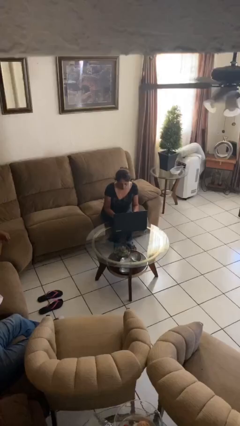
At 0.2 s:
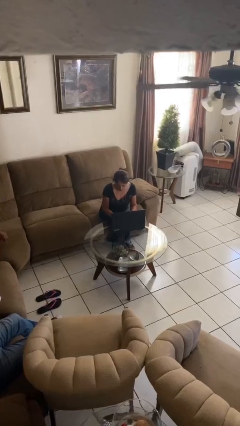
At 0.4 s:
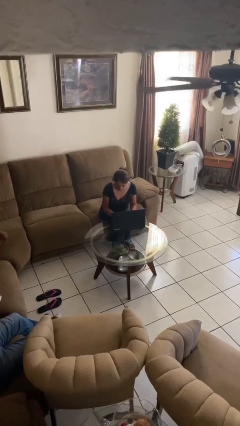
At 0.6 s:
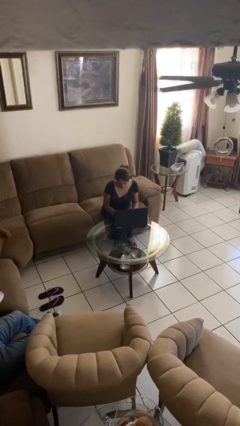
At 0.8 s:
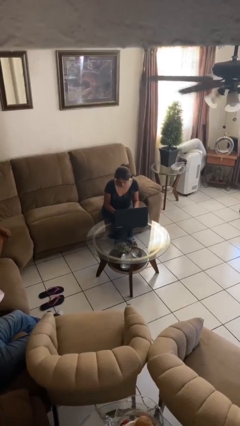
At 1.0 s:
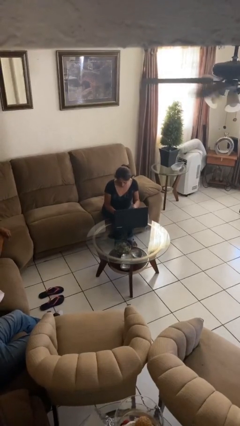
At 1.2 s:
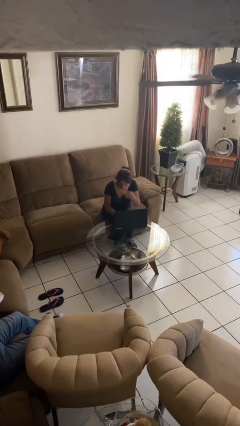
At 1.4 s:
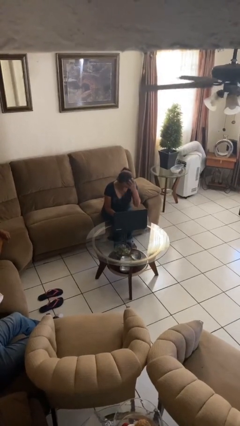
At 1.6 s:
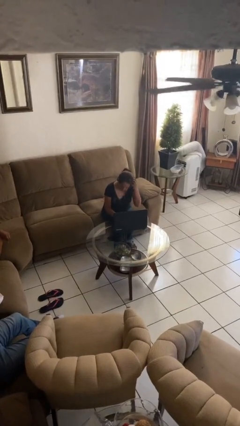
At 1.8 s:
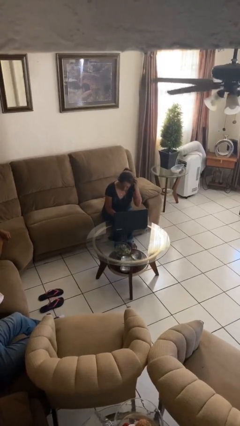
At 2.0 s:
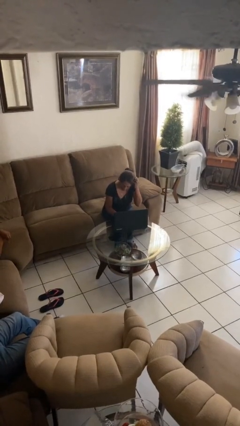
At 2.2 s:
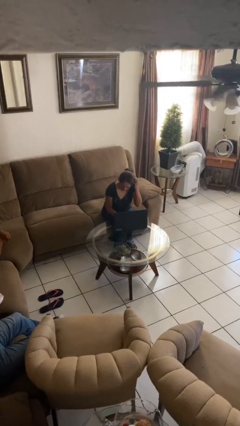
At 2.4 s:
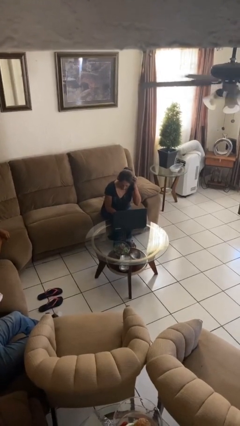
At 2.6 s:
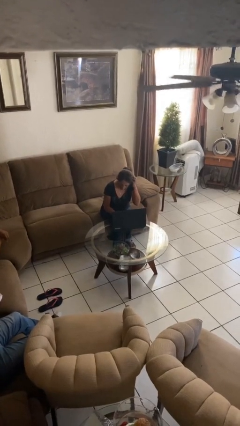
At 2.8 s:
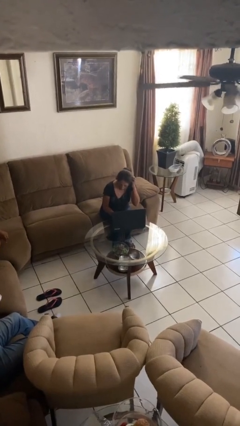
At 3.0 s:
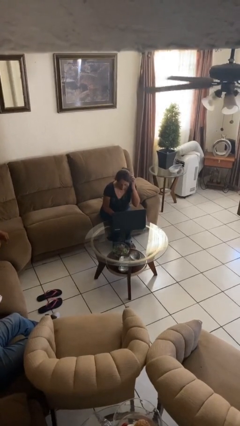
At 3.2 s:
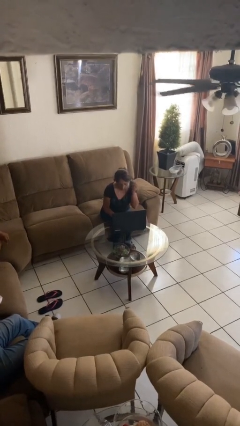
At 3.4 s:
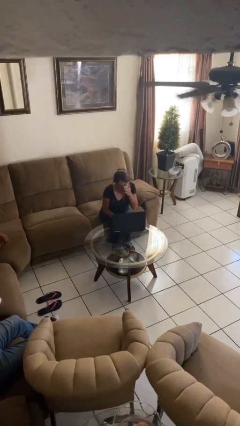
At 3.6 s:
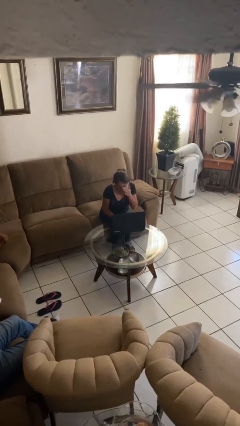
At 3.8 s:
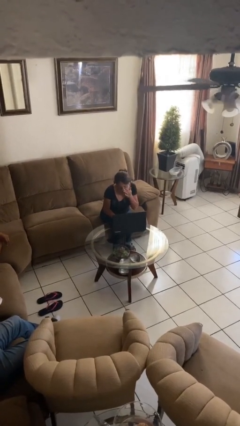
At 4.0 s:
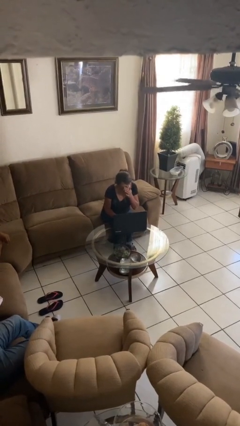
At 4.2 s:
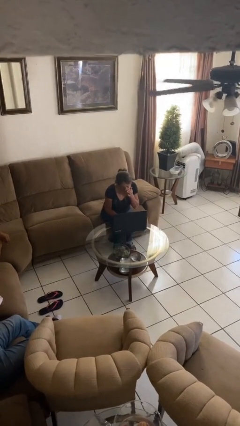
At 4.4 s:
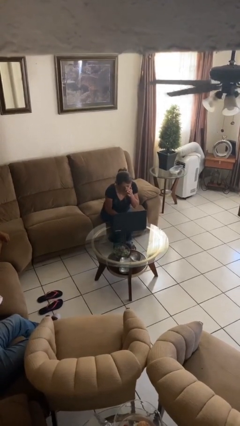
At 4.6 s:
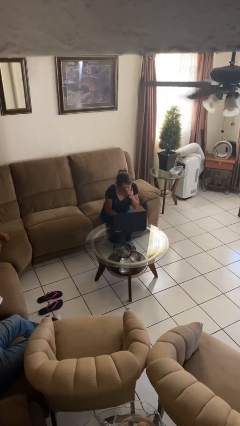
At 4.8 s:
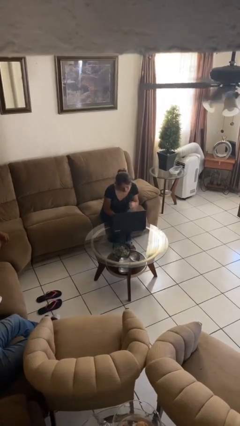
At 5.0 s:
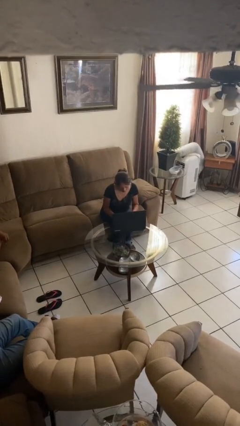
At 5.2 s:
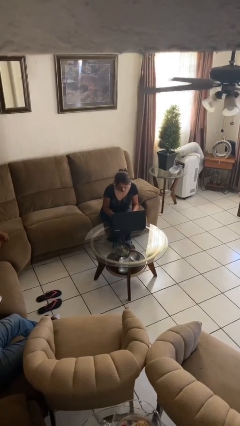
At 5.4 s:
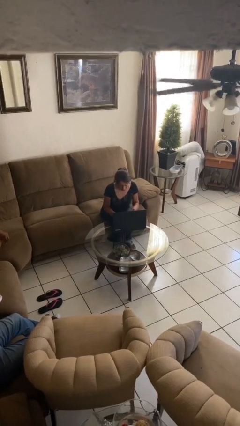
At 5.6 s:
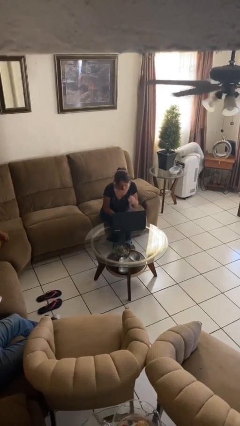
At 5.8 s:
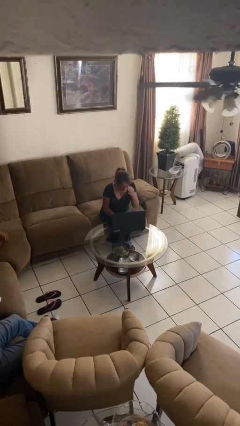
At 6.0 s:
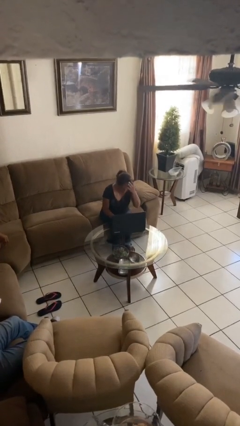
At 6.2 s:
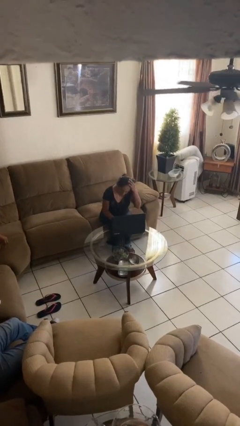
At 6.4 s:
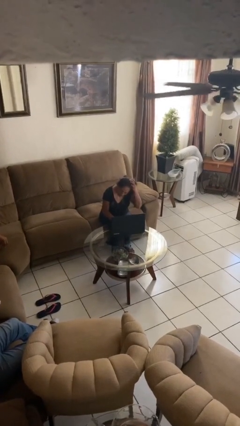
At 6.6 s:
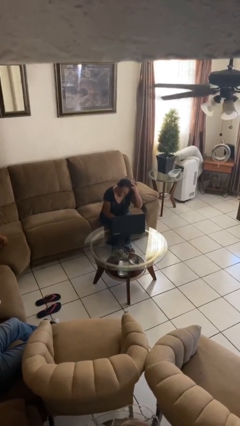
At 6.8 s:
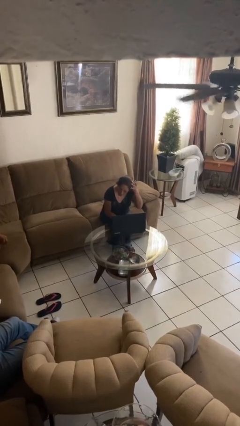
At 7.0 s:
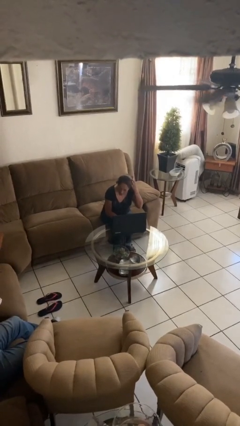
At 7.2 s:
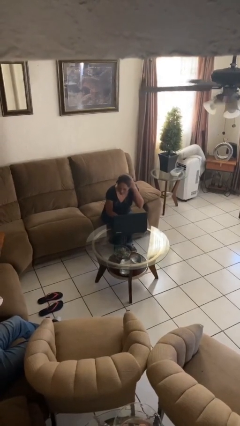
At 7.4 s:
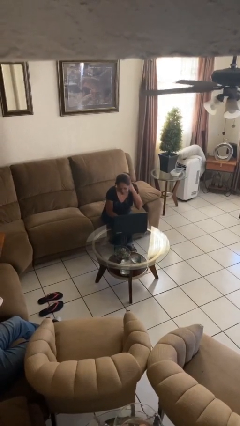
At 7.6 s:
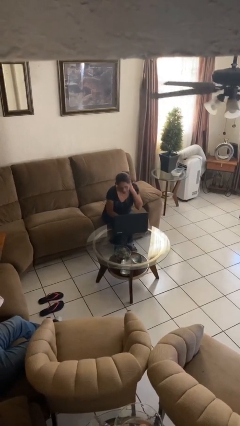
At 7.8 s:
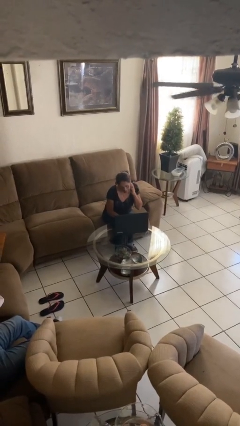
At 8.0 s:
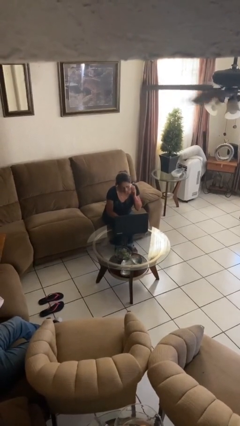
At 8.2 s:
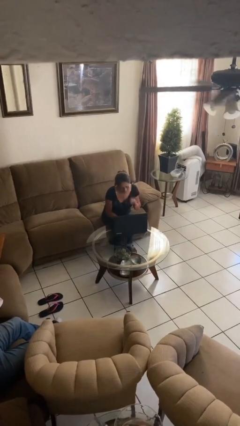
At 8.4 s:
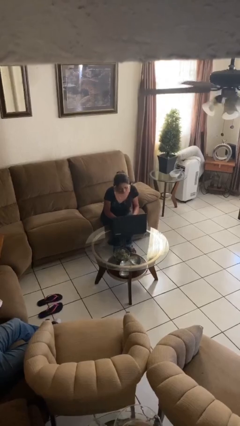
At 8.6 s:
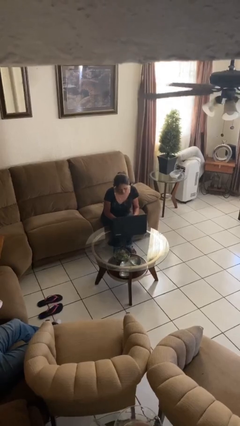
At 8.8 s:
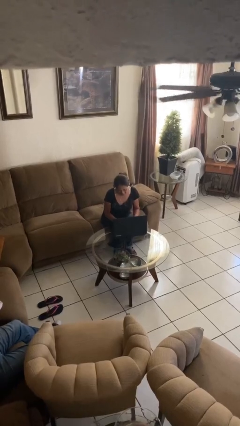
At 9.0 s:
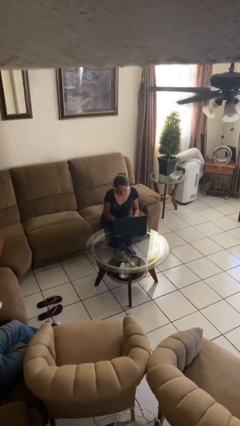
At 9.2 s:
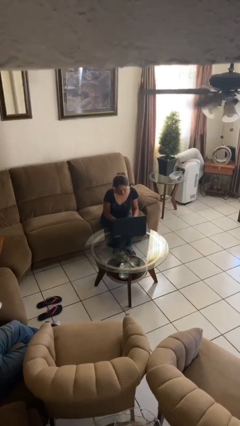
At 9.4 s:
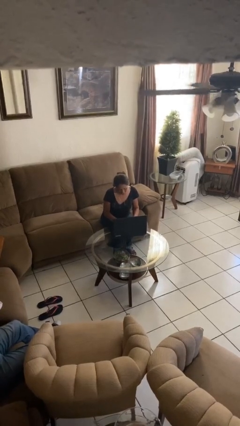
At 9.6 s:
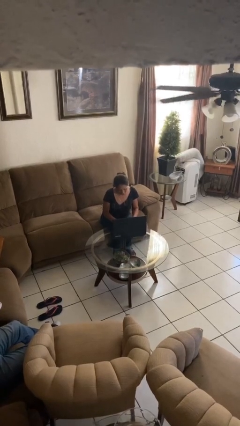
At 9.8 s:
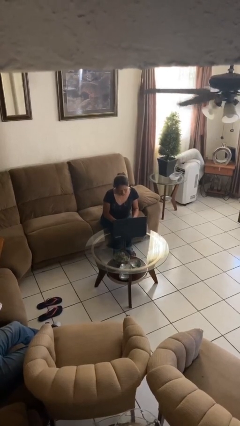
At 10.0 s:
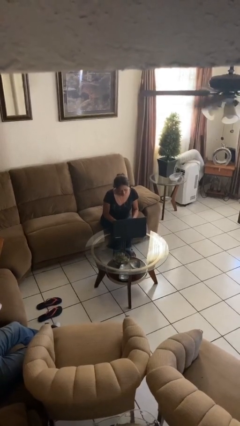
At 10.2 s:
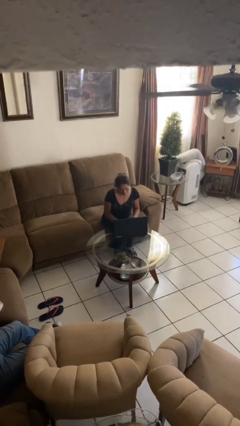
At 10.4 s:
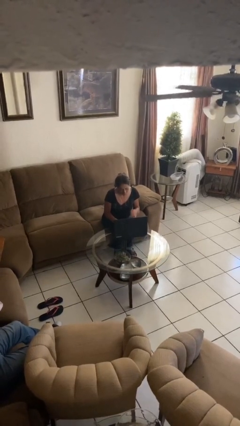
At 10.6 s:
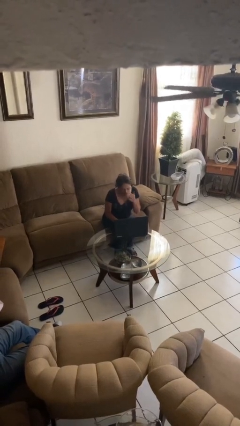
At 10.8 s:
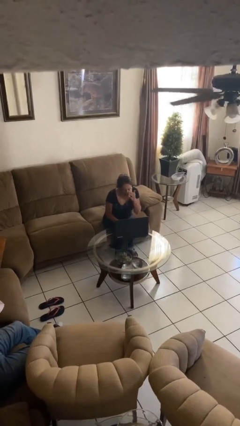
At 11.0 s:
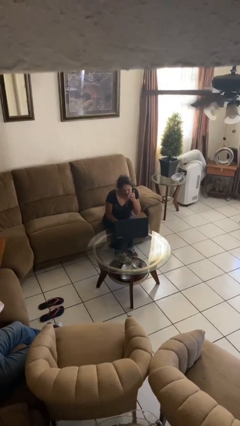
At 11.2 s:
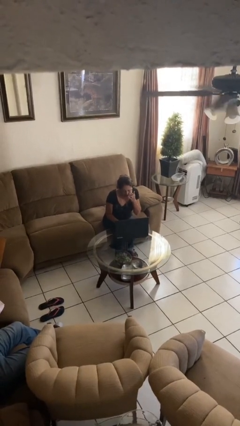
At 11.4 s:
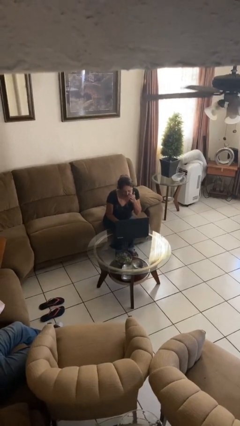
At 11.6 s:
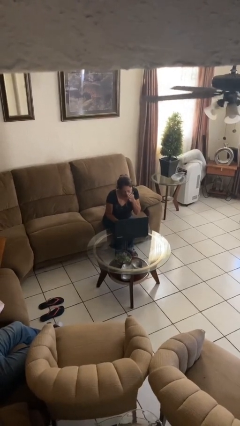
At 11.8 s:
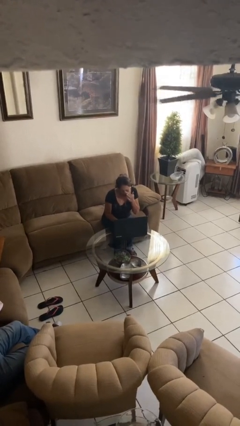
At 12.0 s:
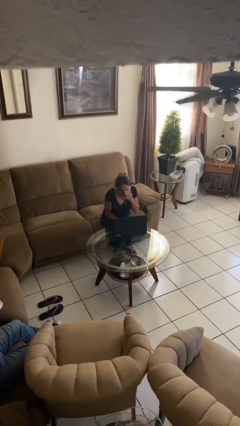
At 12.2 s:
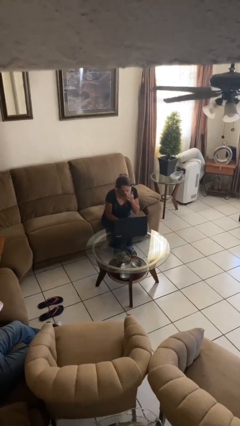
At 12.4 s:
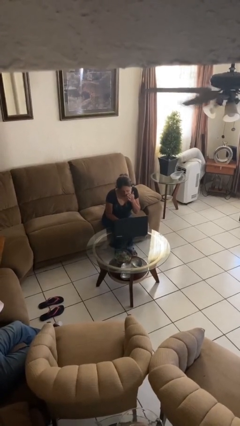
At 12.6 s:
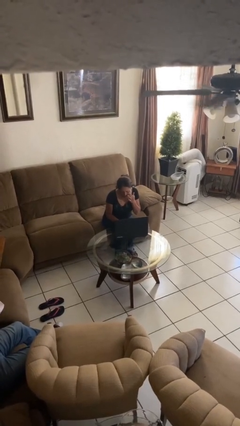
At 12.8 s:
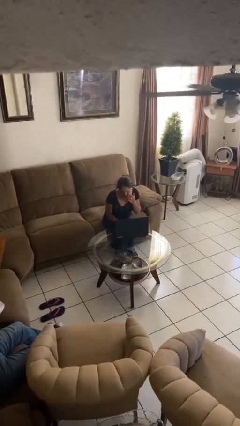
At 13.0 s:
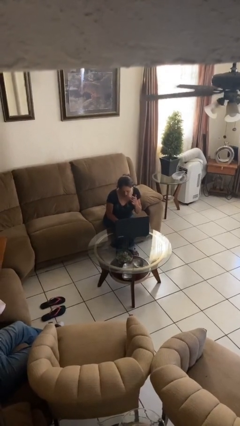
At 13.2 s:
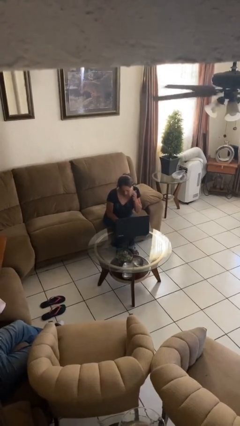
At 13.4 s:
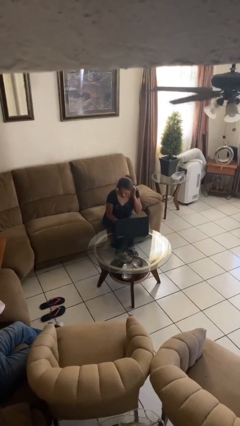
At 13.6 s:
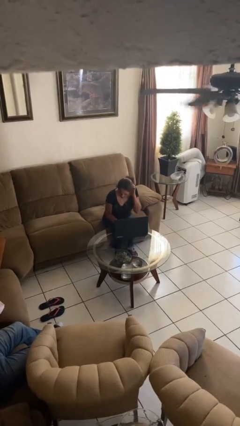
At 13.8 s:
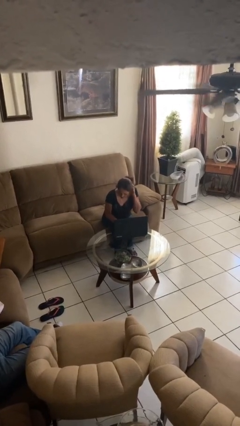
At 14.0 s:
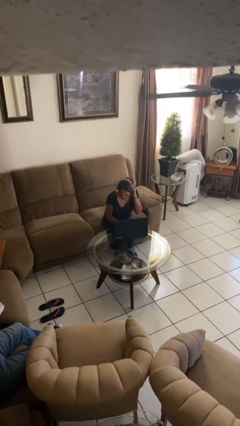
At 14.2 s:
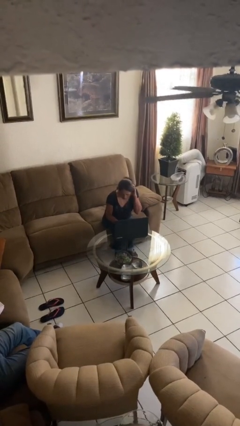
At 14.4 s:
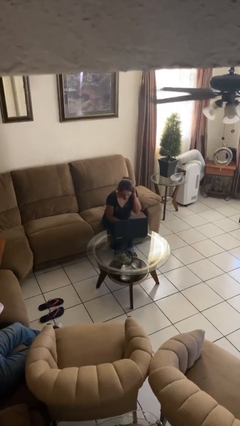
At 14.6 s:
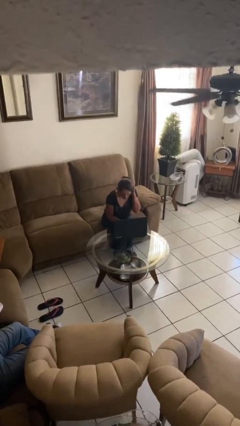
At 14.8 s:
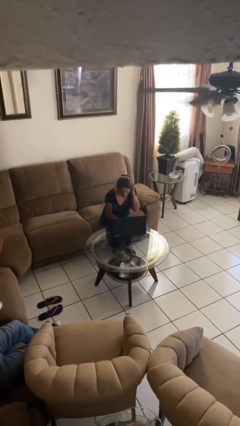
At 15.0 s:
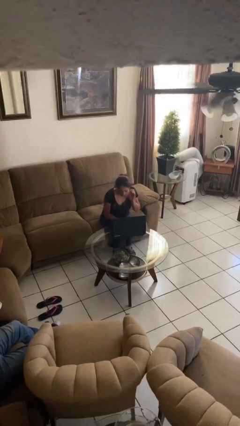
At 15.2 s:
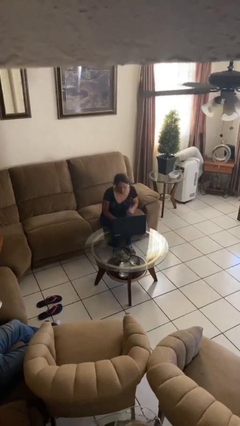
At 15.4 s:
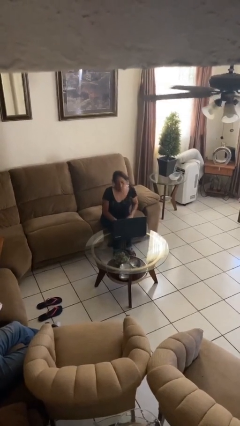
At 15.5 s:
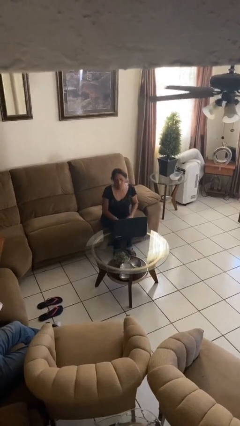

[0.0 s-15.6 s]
person interacts with laptop

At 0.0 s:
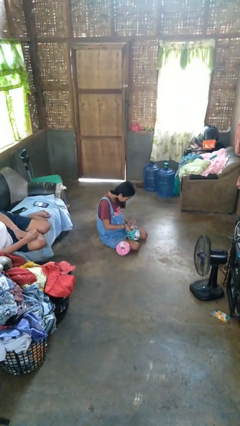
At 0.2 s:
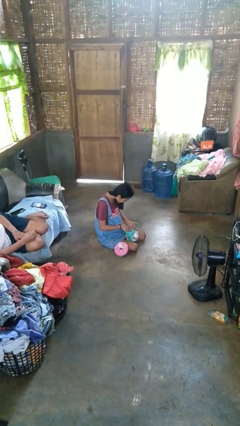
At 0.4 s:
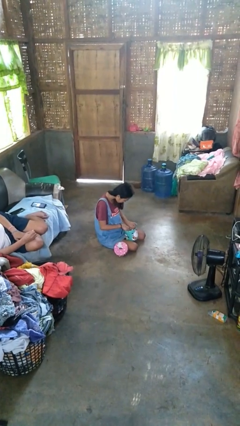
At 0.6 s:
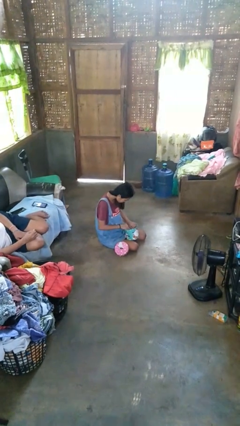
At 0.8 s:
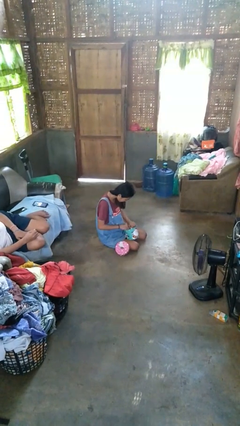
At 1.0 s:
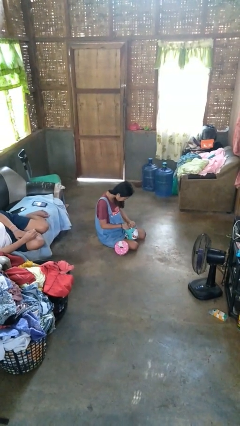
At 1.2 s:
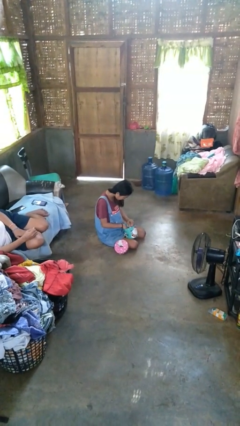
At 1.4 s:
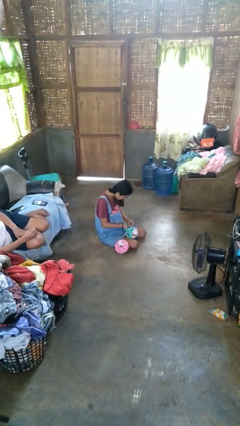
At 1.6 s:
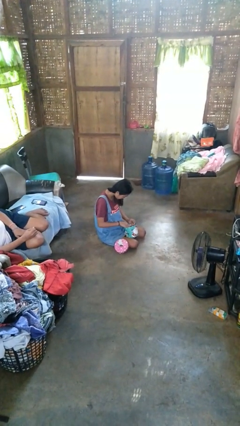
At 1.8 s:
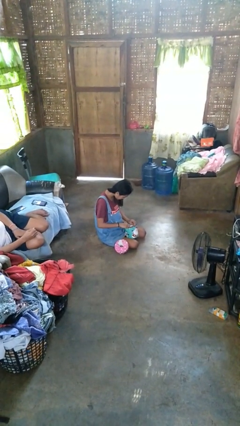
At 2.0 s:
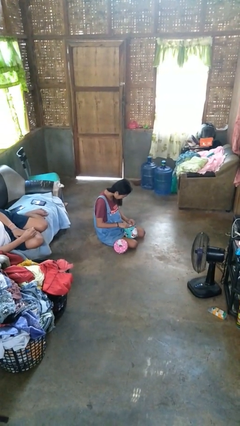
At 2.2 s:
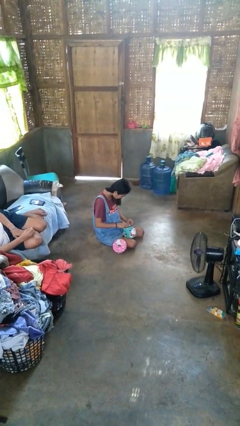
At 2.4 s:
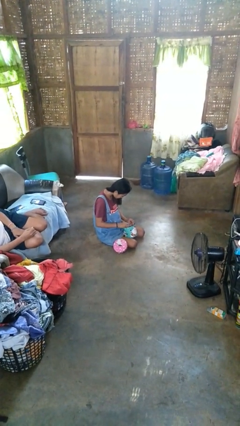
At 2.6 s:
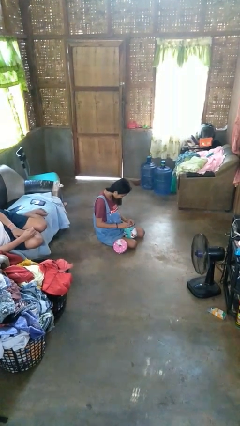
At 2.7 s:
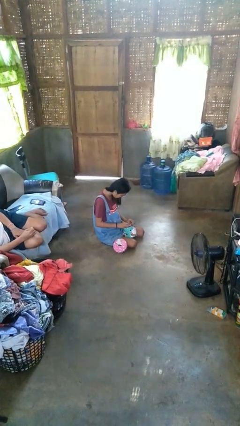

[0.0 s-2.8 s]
person searches jewelry box
